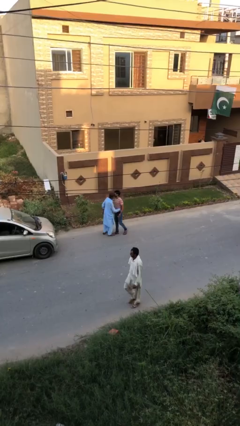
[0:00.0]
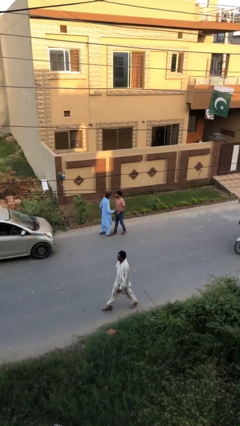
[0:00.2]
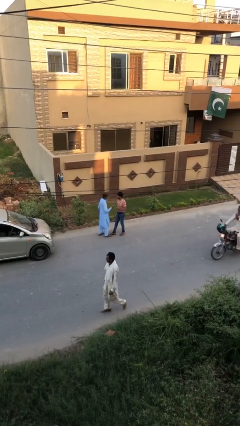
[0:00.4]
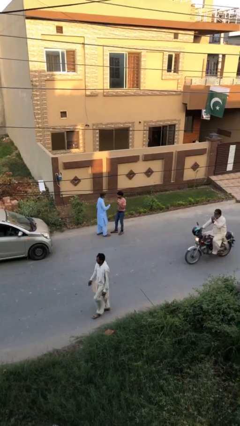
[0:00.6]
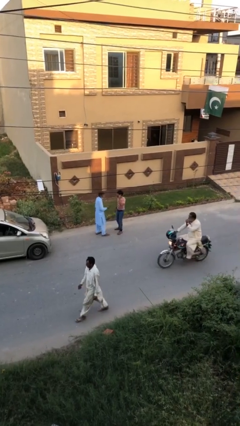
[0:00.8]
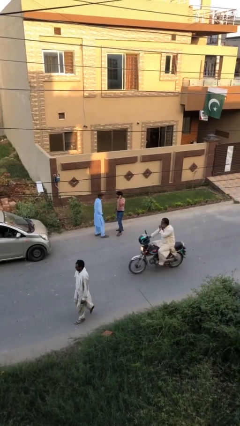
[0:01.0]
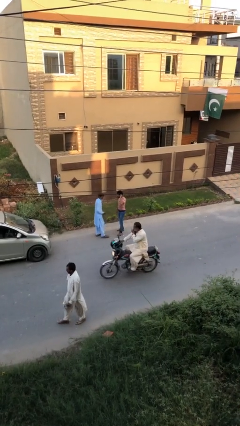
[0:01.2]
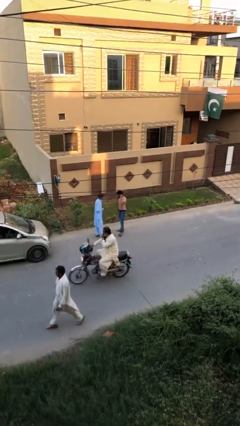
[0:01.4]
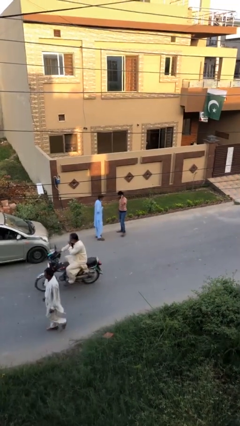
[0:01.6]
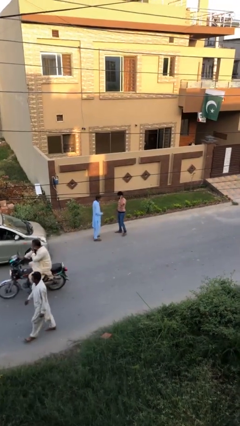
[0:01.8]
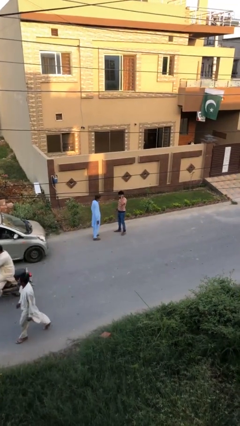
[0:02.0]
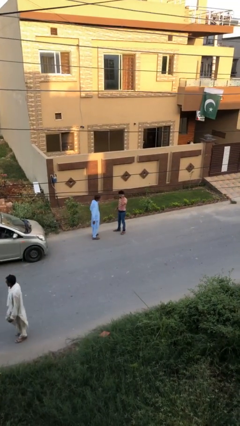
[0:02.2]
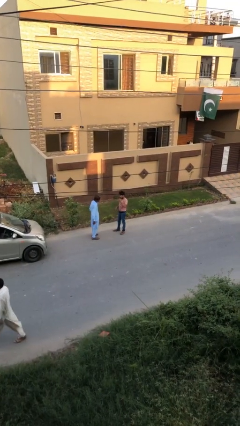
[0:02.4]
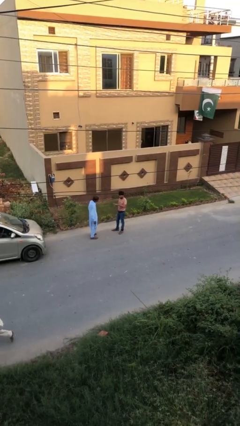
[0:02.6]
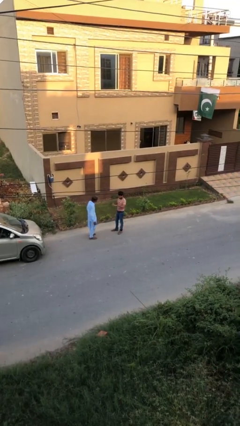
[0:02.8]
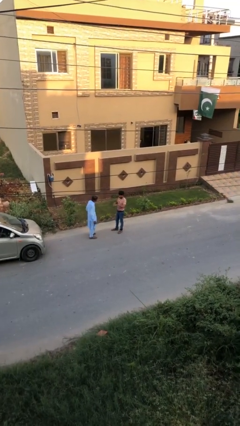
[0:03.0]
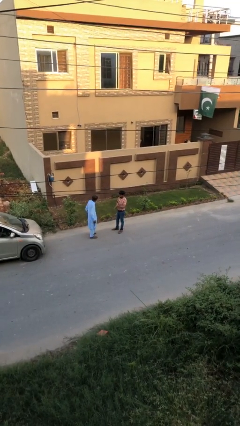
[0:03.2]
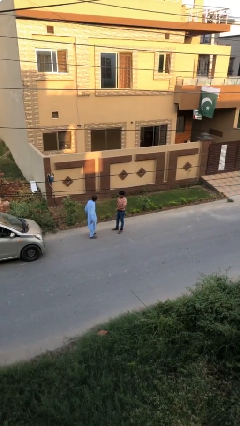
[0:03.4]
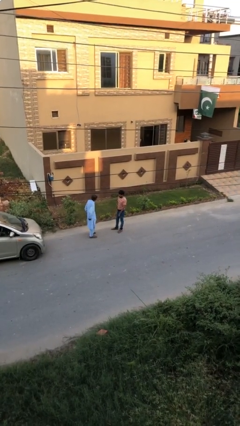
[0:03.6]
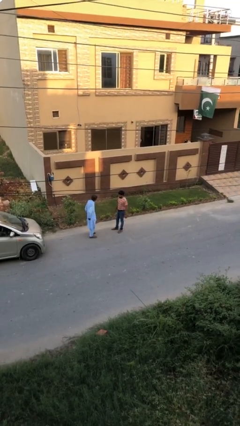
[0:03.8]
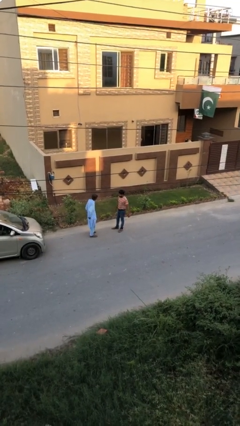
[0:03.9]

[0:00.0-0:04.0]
person talks to person

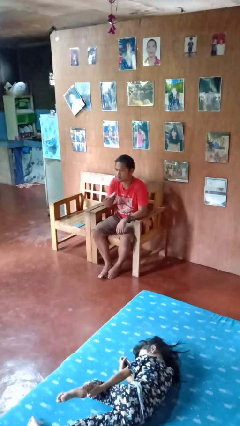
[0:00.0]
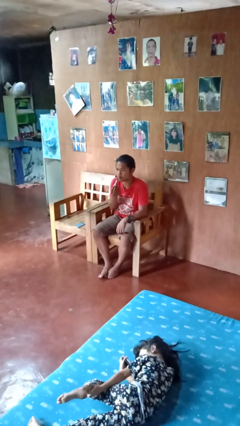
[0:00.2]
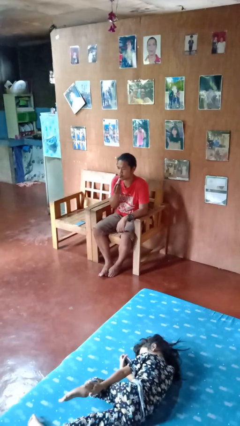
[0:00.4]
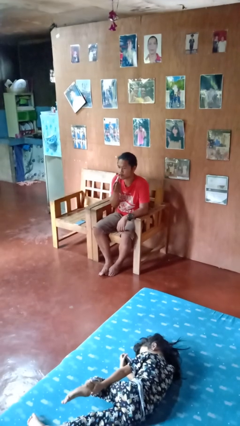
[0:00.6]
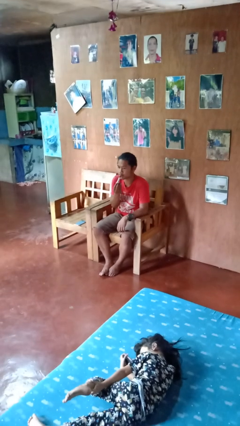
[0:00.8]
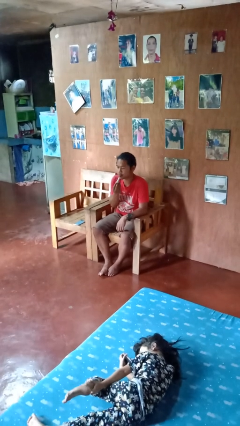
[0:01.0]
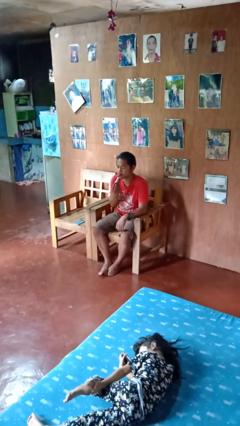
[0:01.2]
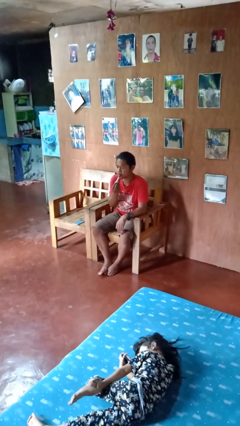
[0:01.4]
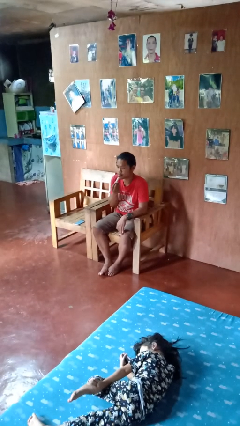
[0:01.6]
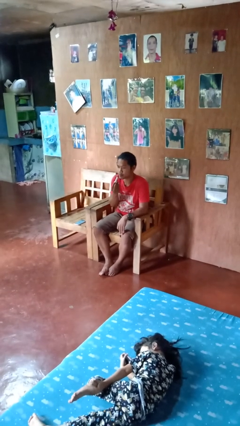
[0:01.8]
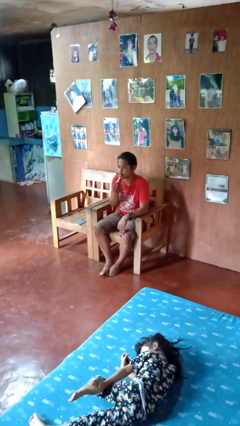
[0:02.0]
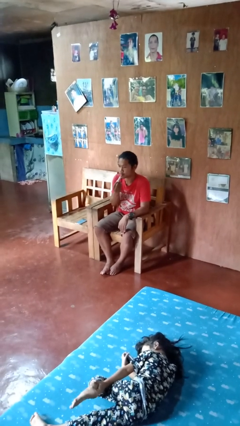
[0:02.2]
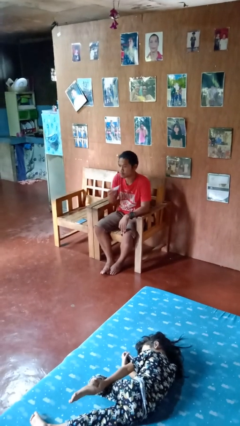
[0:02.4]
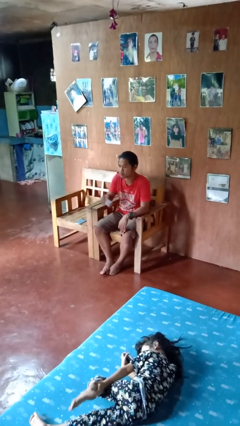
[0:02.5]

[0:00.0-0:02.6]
person applies lip makeup

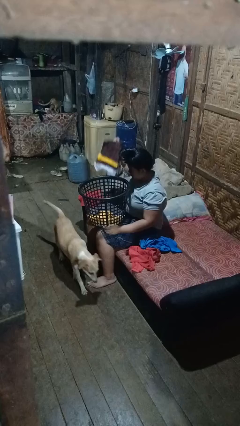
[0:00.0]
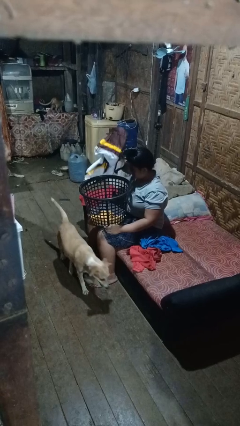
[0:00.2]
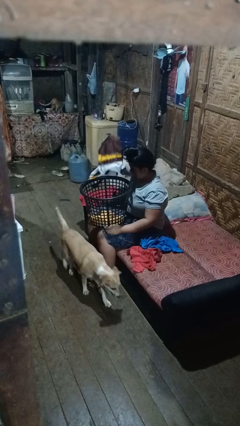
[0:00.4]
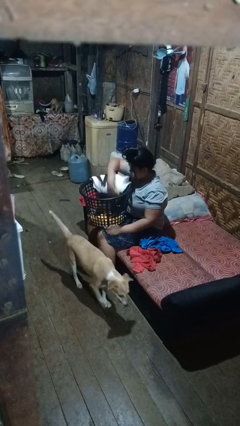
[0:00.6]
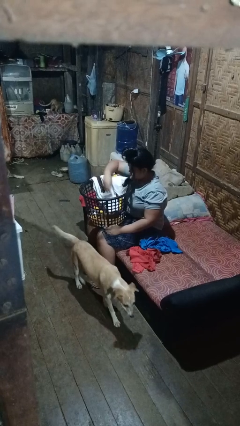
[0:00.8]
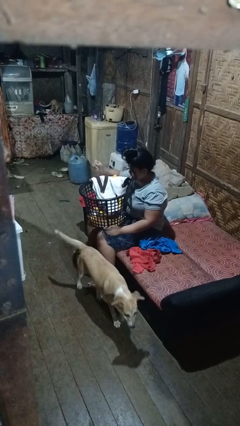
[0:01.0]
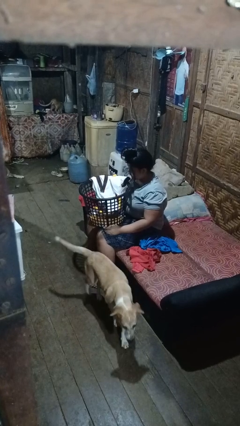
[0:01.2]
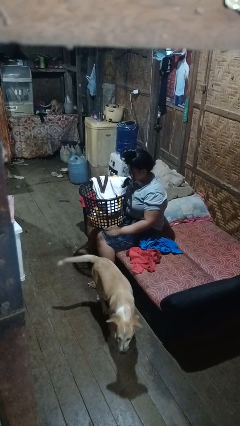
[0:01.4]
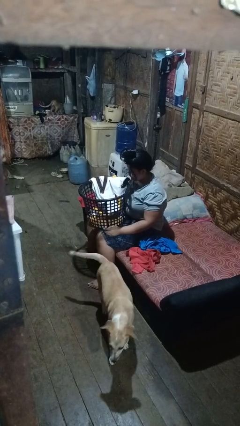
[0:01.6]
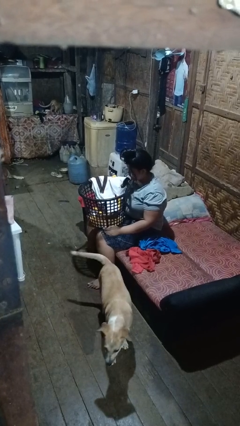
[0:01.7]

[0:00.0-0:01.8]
person puts object into basket

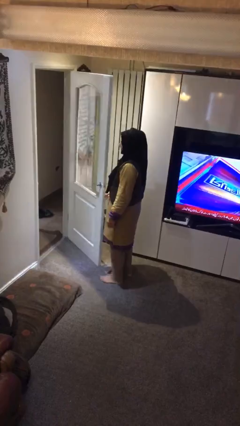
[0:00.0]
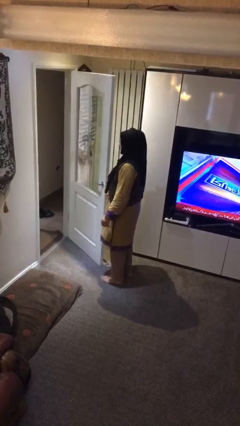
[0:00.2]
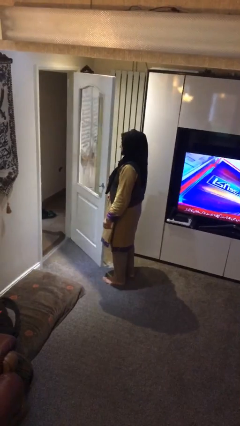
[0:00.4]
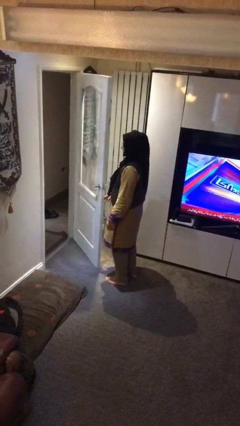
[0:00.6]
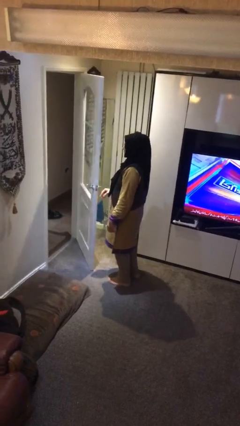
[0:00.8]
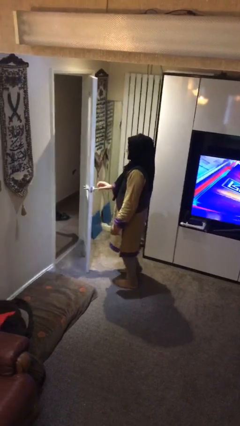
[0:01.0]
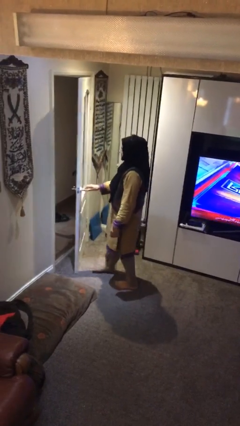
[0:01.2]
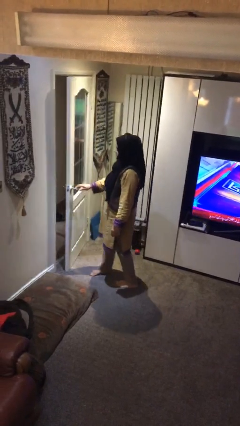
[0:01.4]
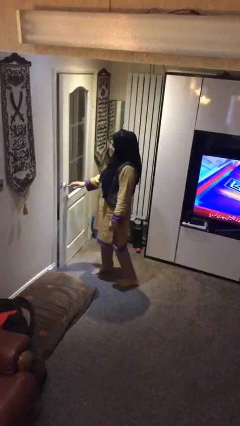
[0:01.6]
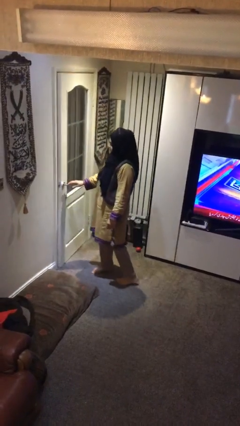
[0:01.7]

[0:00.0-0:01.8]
person closes facility door

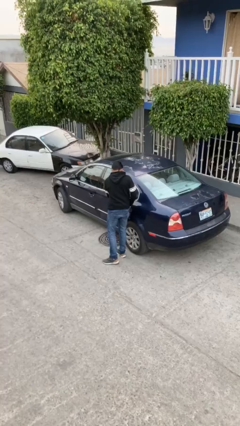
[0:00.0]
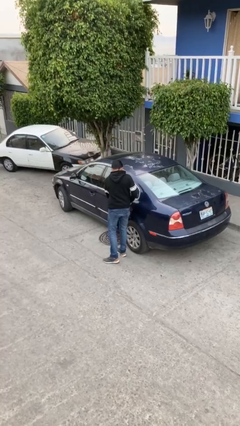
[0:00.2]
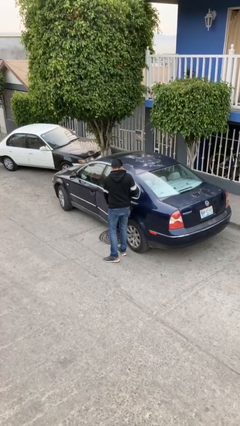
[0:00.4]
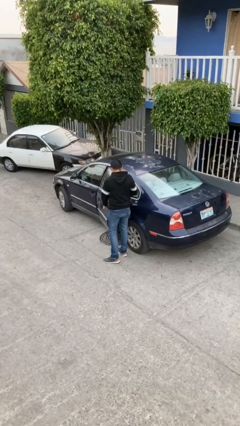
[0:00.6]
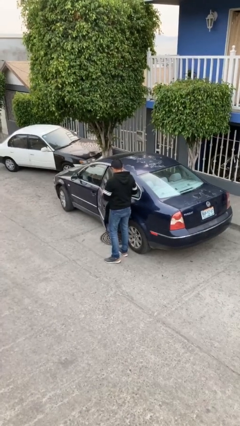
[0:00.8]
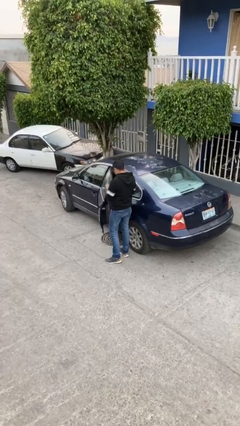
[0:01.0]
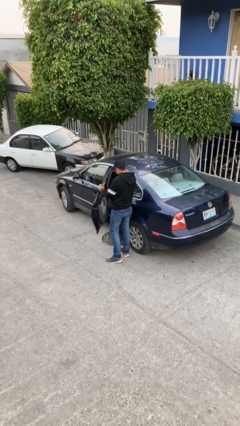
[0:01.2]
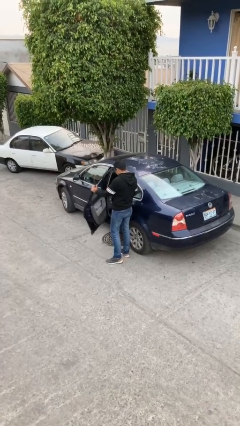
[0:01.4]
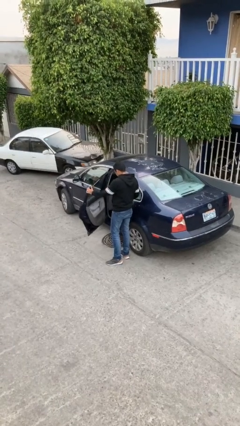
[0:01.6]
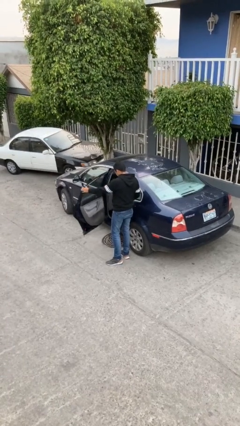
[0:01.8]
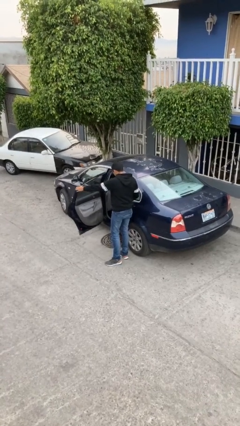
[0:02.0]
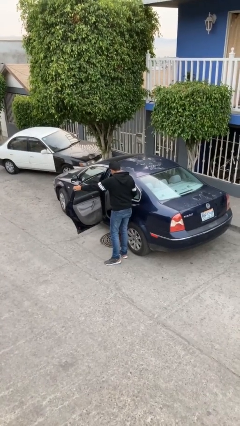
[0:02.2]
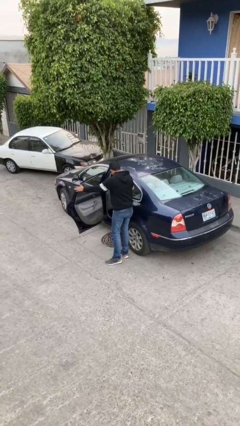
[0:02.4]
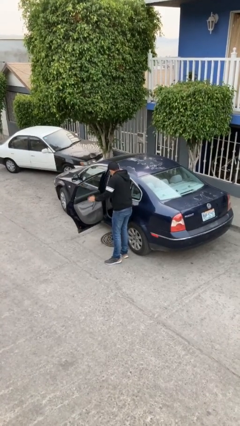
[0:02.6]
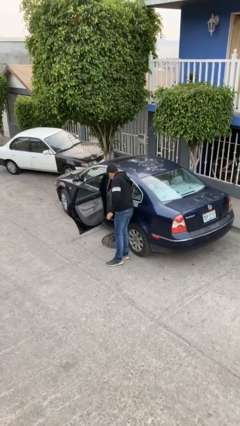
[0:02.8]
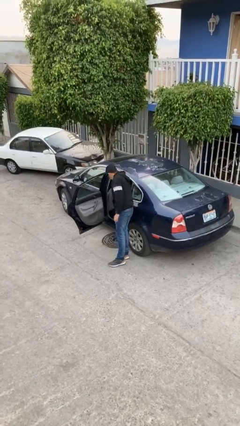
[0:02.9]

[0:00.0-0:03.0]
person opens car door

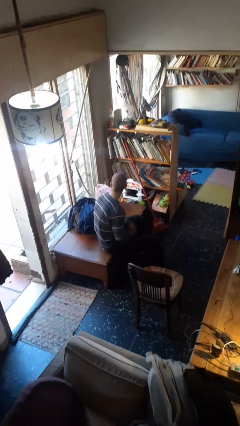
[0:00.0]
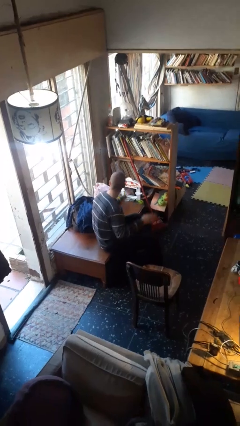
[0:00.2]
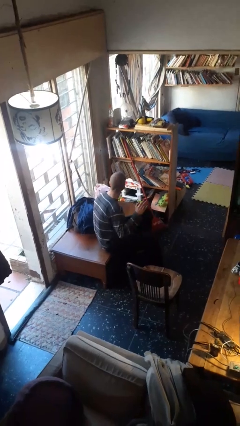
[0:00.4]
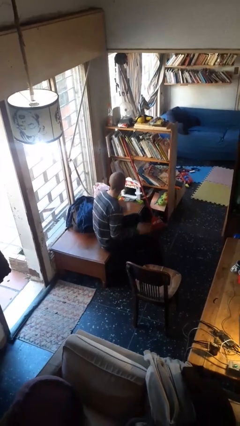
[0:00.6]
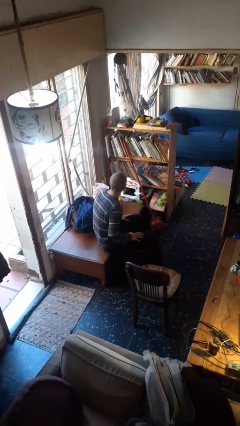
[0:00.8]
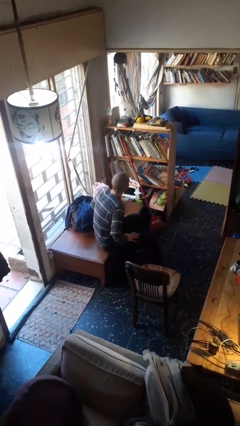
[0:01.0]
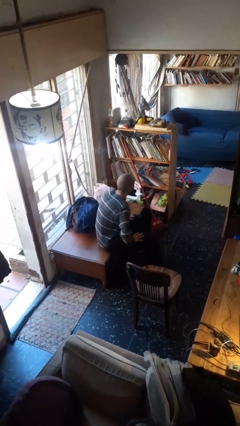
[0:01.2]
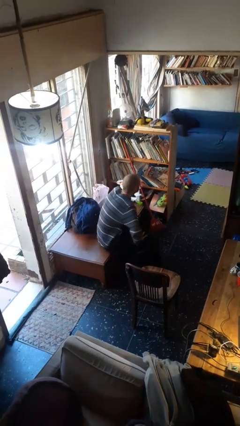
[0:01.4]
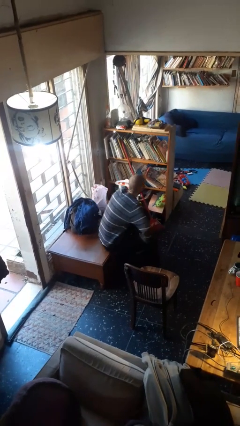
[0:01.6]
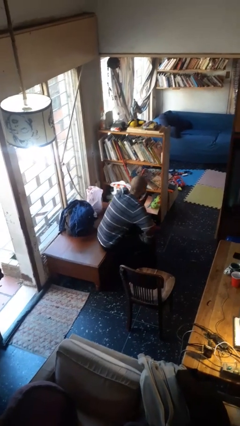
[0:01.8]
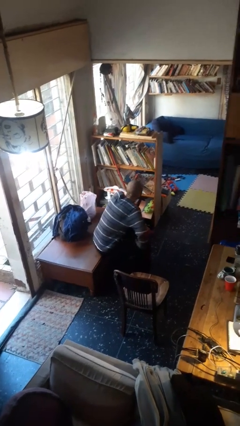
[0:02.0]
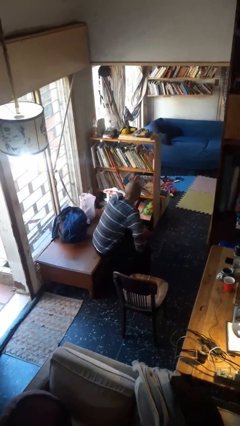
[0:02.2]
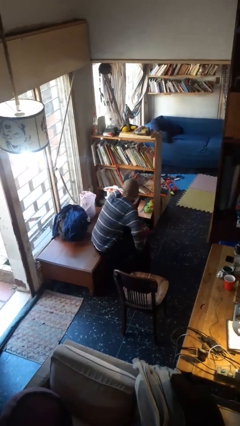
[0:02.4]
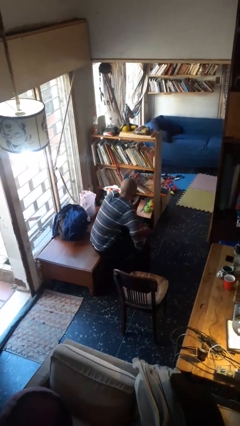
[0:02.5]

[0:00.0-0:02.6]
person slaps hands on thighs

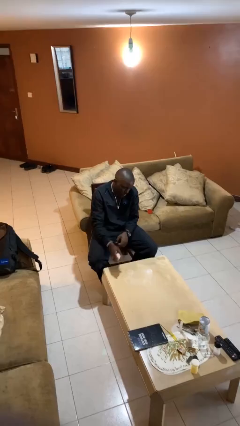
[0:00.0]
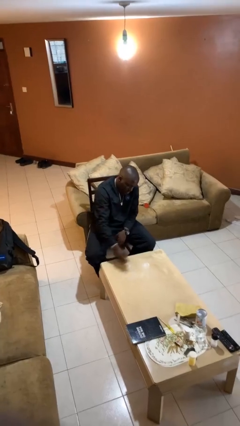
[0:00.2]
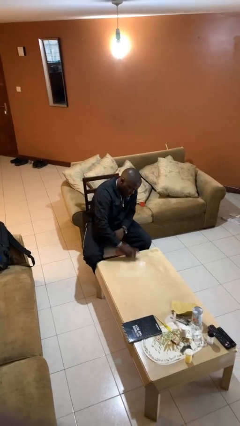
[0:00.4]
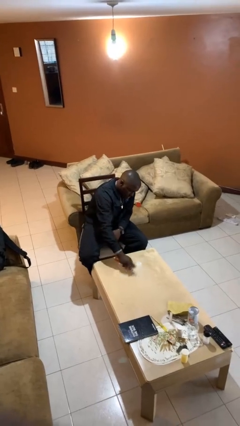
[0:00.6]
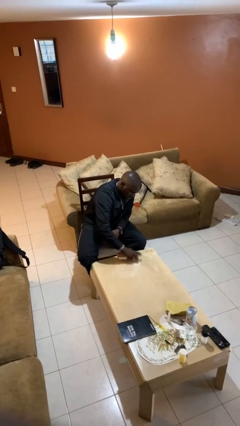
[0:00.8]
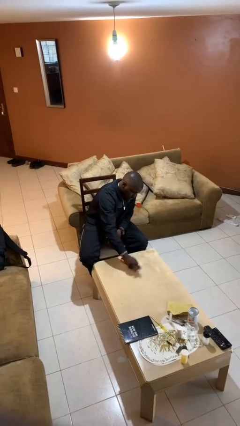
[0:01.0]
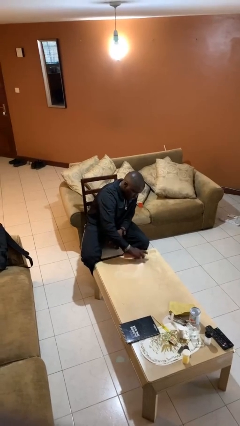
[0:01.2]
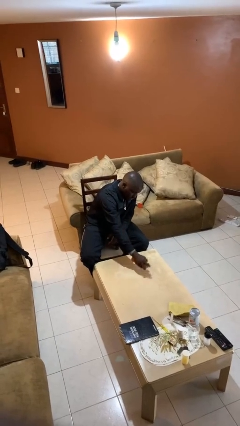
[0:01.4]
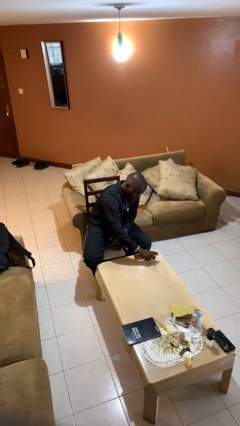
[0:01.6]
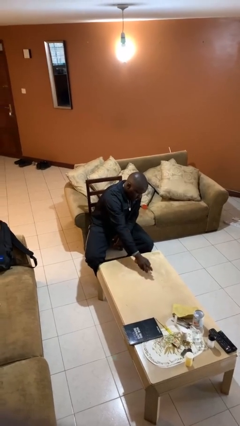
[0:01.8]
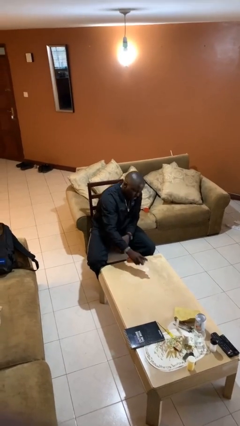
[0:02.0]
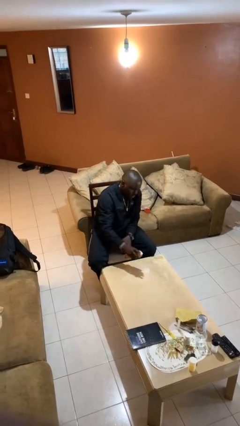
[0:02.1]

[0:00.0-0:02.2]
person sprays from bottle
